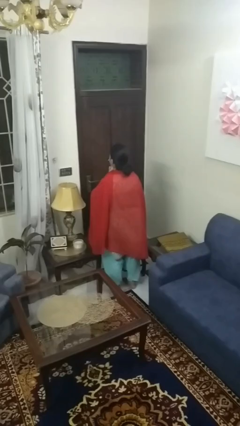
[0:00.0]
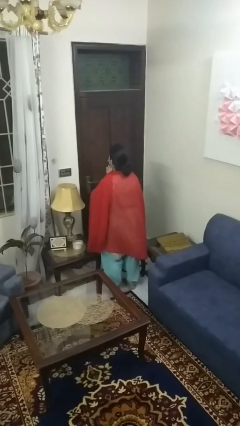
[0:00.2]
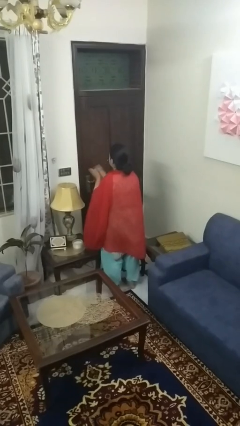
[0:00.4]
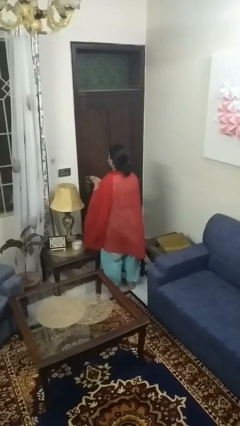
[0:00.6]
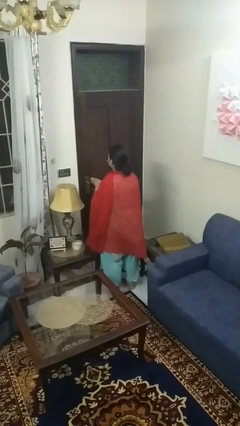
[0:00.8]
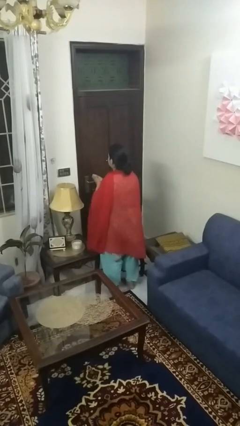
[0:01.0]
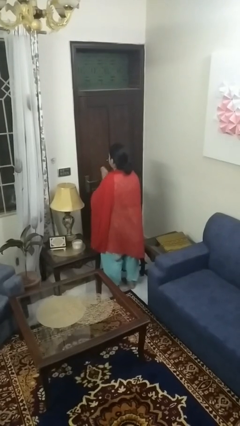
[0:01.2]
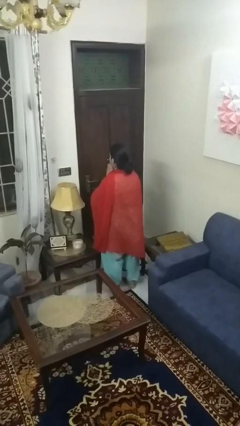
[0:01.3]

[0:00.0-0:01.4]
person swats bug

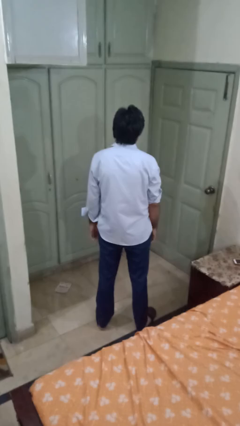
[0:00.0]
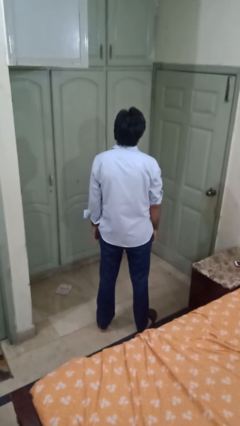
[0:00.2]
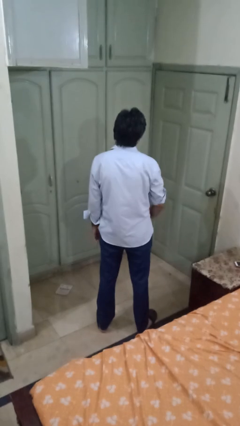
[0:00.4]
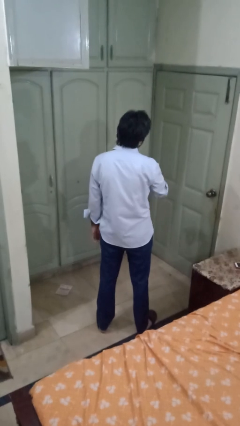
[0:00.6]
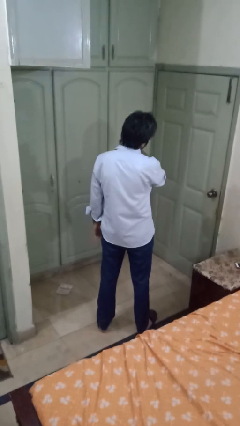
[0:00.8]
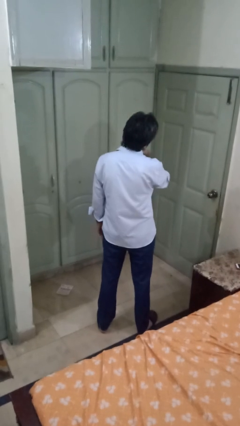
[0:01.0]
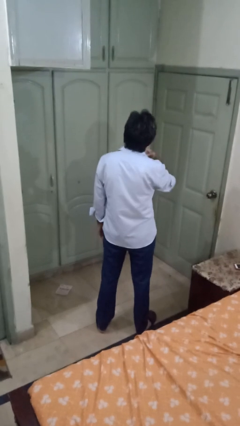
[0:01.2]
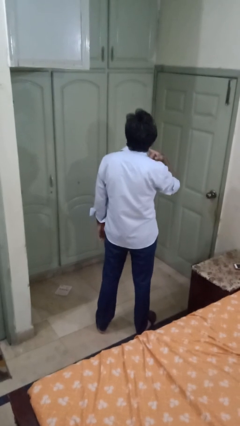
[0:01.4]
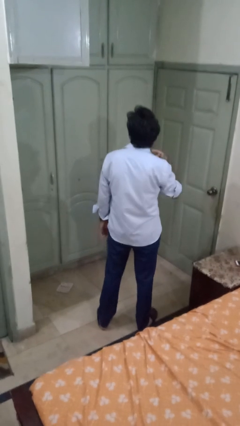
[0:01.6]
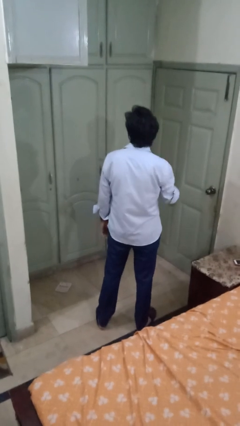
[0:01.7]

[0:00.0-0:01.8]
person gestures cut

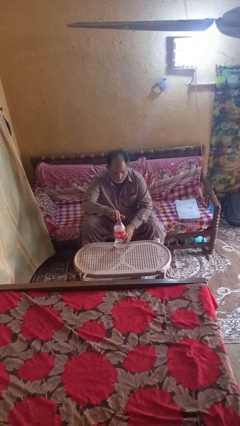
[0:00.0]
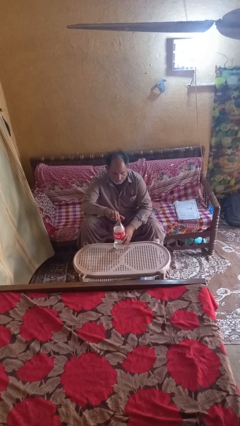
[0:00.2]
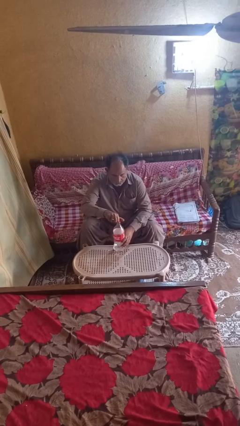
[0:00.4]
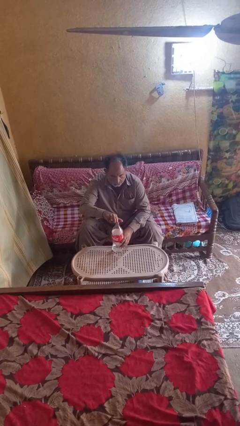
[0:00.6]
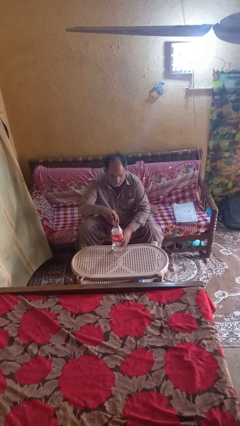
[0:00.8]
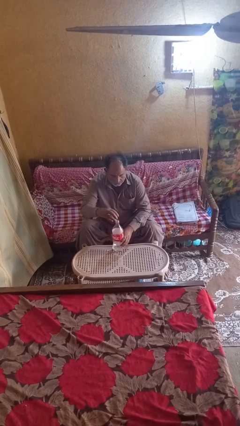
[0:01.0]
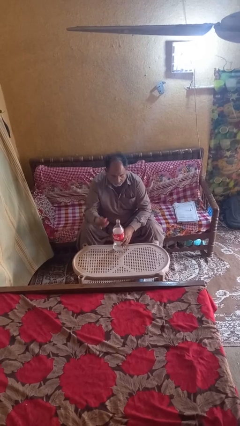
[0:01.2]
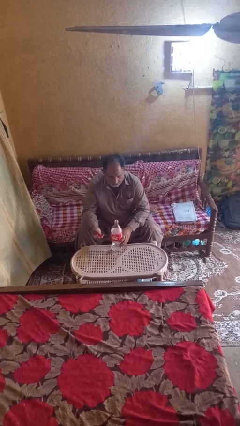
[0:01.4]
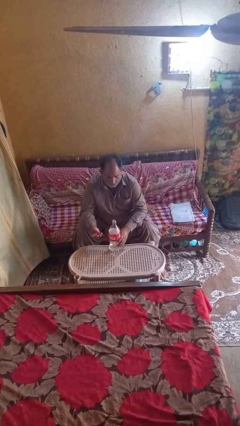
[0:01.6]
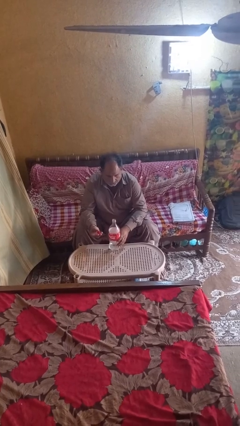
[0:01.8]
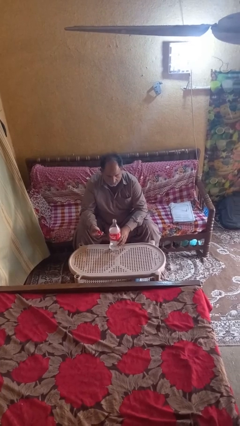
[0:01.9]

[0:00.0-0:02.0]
person unscrews lid from bottle

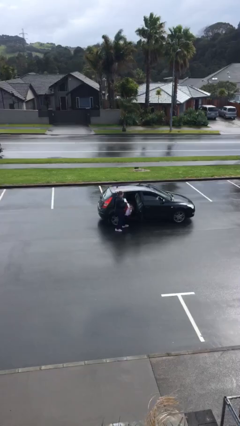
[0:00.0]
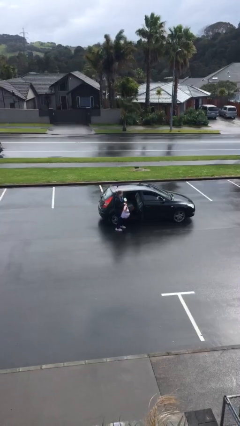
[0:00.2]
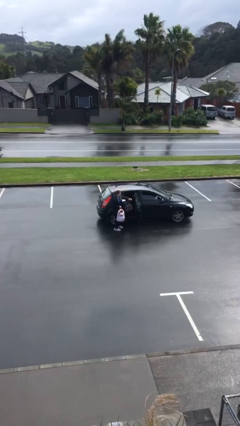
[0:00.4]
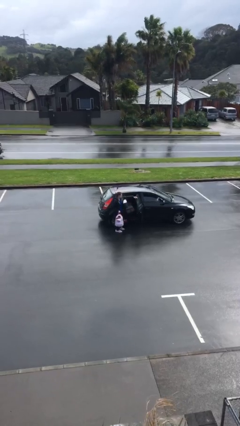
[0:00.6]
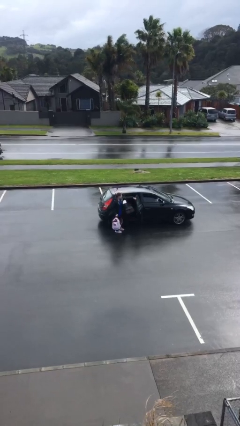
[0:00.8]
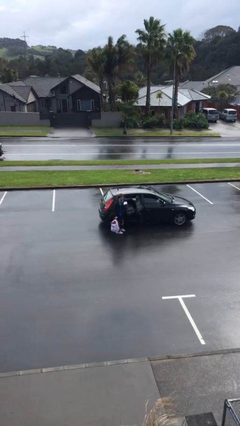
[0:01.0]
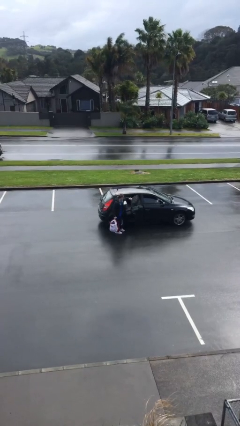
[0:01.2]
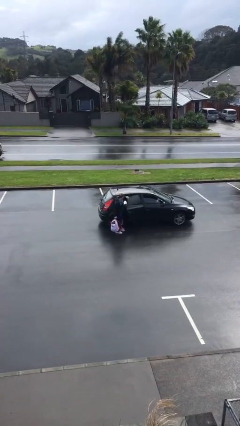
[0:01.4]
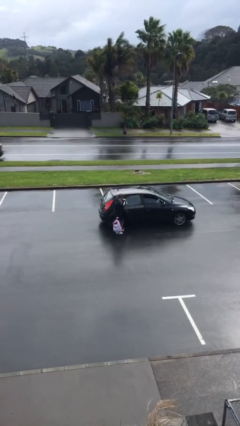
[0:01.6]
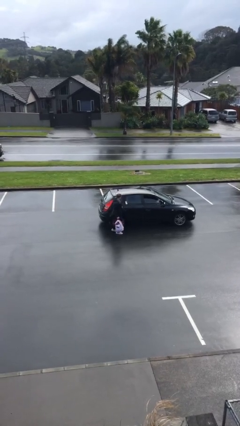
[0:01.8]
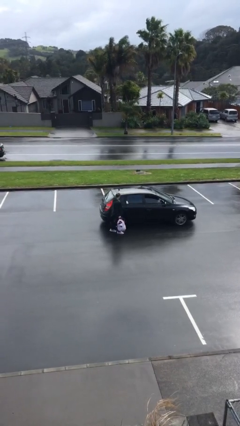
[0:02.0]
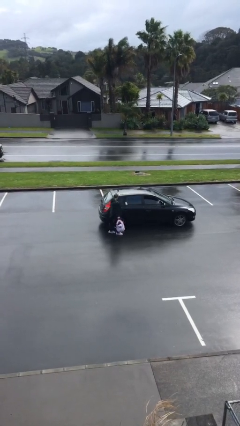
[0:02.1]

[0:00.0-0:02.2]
person closes car door

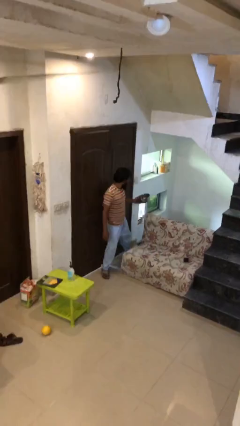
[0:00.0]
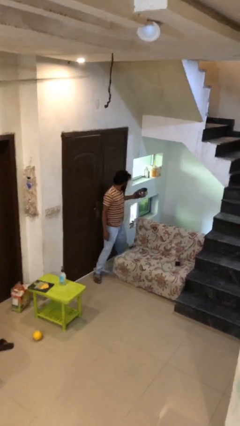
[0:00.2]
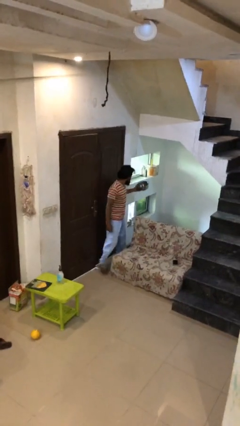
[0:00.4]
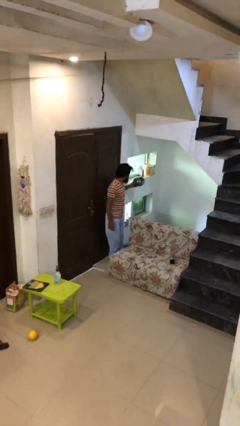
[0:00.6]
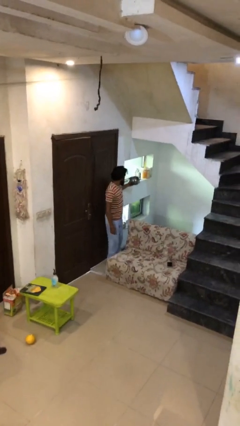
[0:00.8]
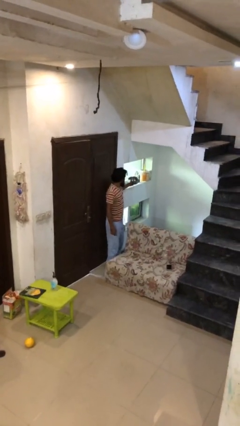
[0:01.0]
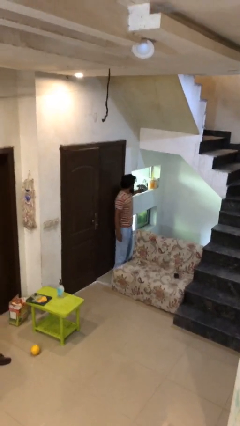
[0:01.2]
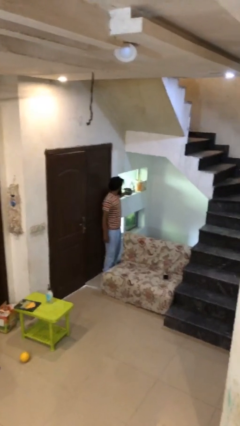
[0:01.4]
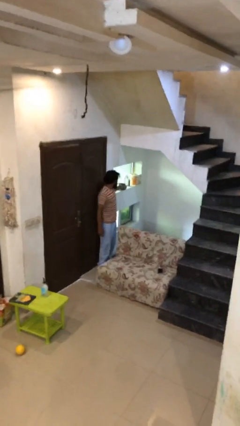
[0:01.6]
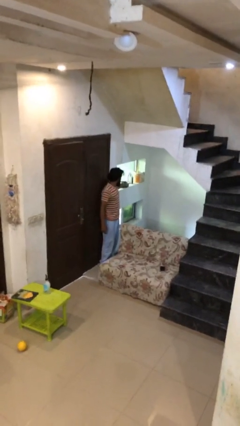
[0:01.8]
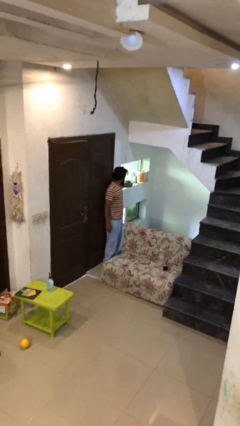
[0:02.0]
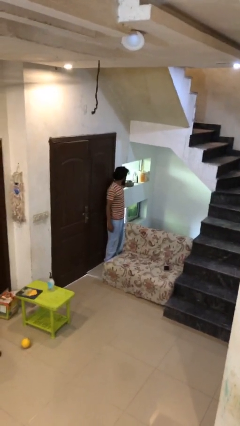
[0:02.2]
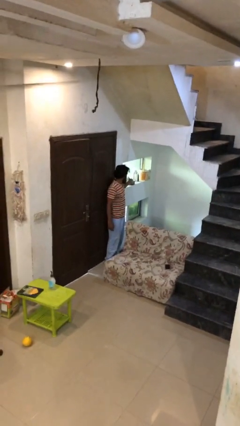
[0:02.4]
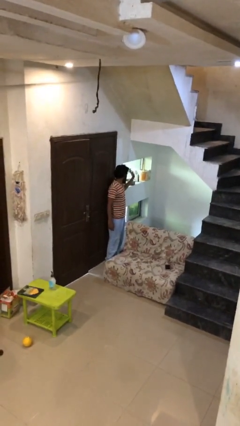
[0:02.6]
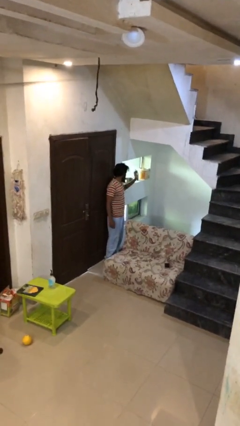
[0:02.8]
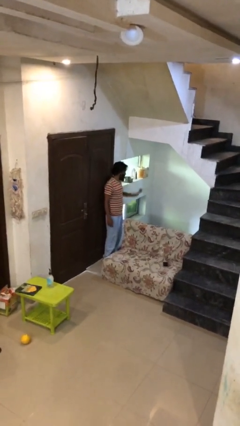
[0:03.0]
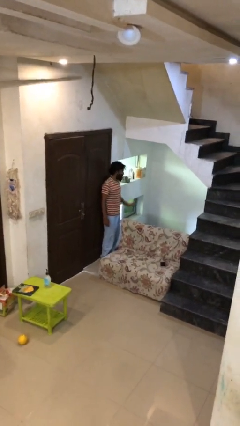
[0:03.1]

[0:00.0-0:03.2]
person puts down object on shelf

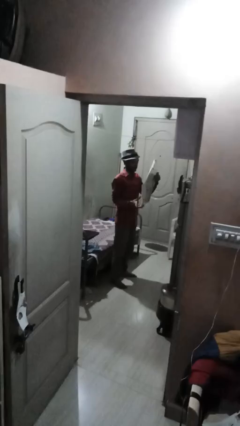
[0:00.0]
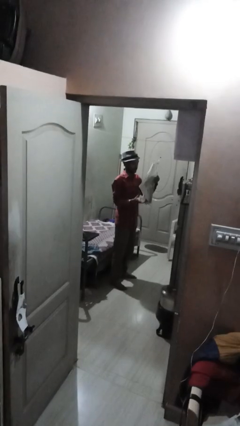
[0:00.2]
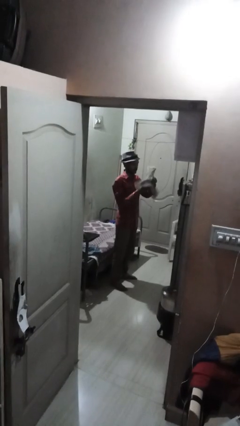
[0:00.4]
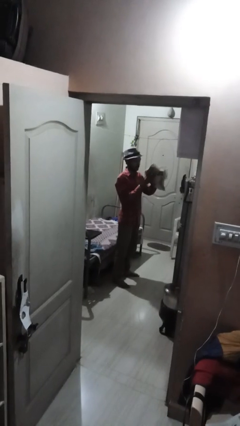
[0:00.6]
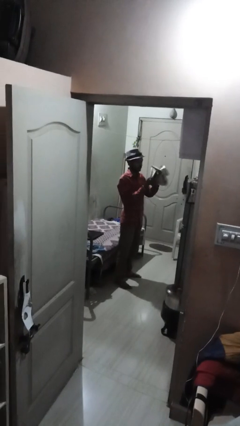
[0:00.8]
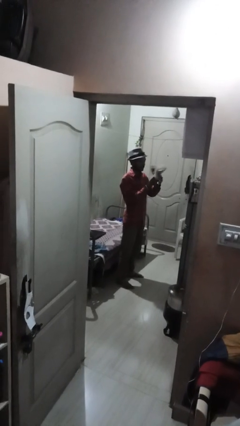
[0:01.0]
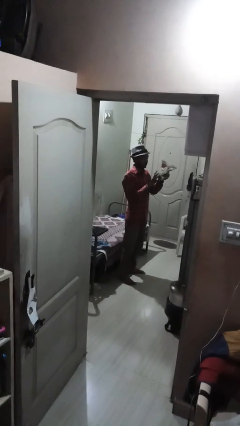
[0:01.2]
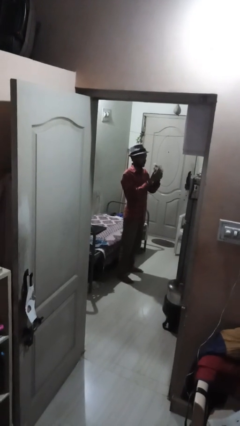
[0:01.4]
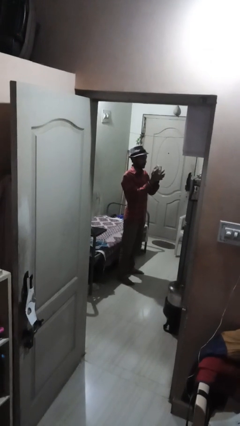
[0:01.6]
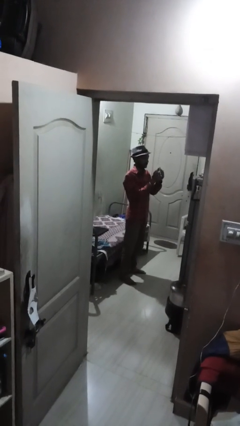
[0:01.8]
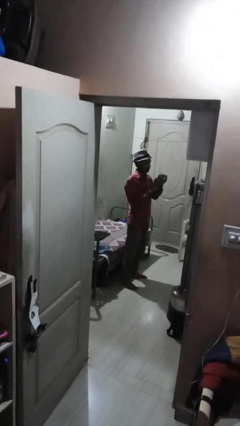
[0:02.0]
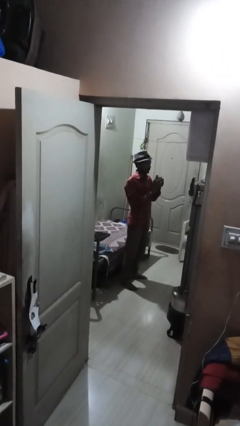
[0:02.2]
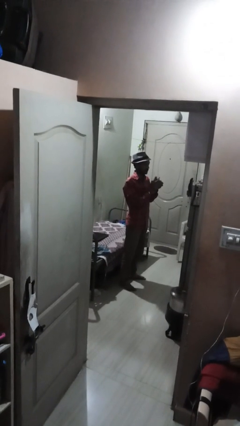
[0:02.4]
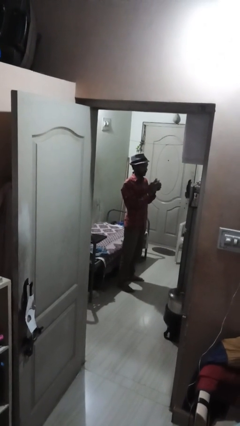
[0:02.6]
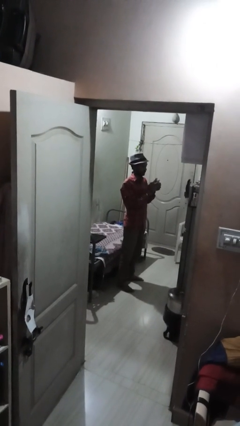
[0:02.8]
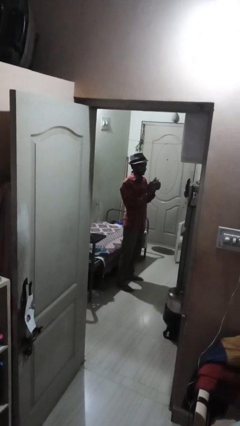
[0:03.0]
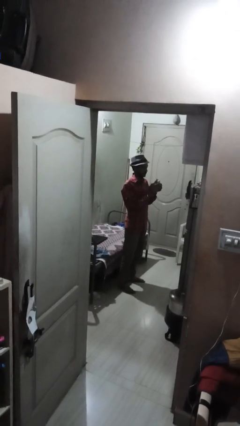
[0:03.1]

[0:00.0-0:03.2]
person crumples paper

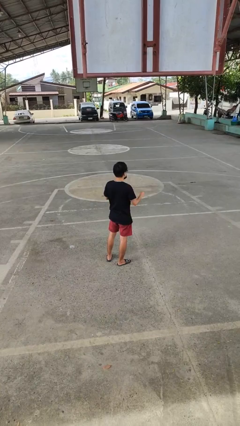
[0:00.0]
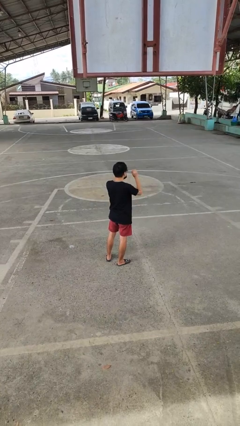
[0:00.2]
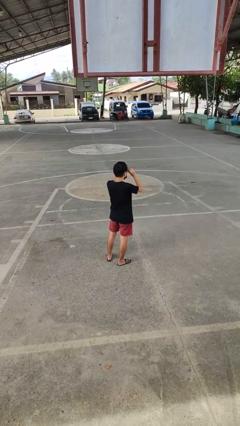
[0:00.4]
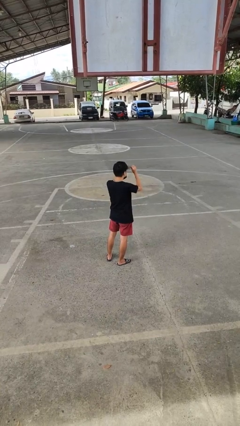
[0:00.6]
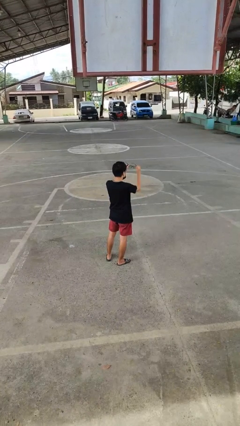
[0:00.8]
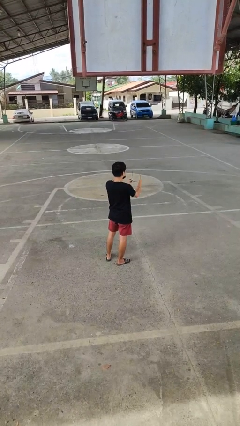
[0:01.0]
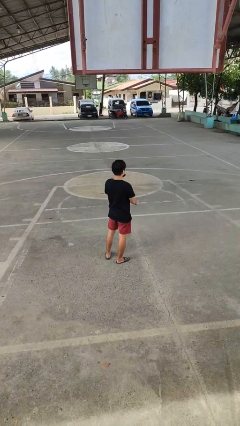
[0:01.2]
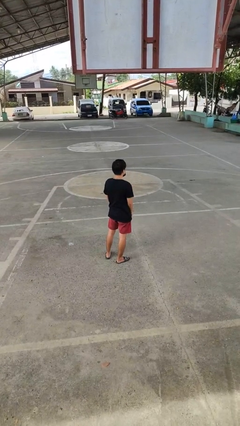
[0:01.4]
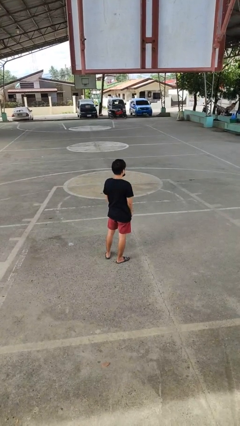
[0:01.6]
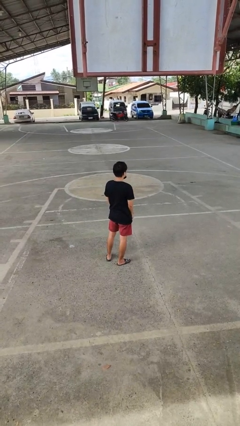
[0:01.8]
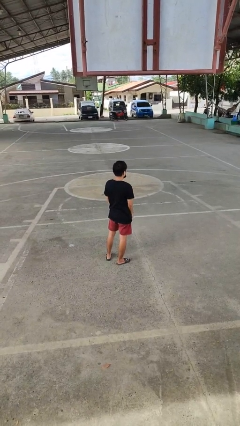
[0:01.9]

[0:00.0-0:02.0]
person takes off glasses

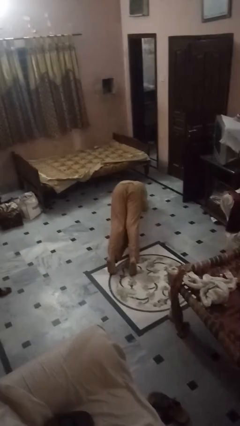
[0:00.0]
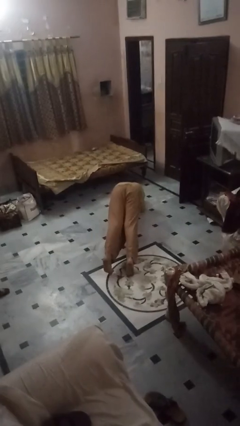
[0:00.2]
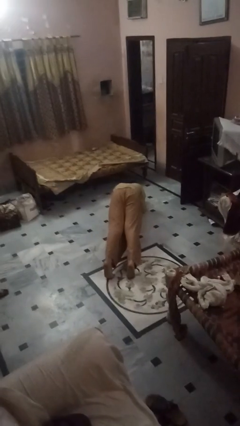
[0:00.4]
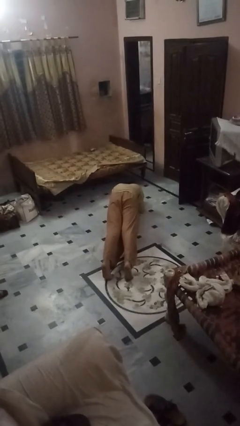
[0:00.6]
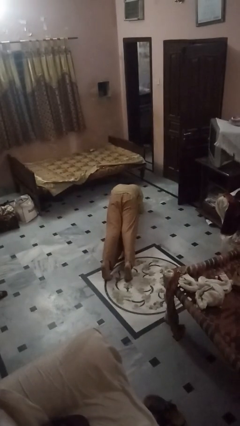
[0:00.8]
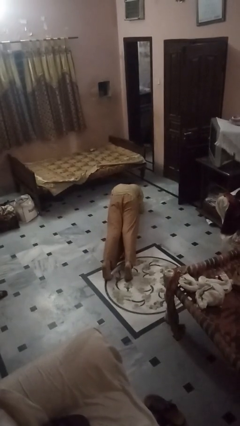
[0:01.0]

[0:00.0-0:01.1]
person stands up from floor
